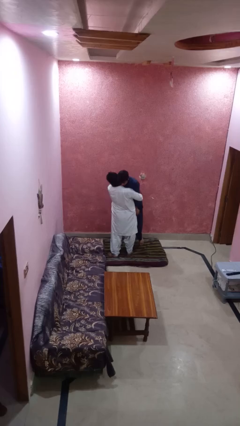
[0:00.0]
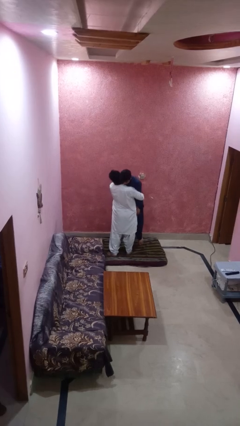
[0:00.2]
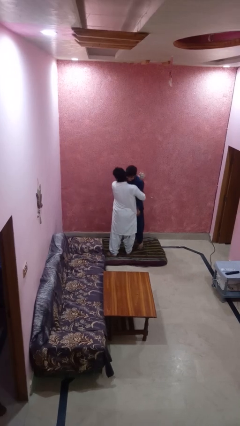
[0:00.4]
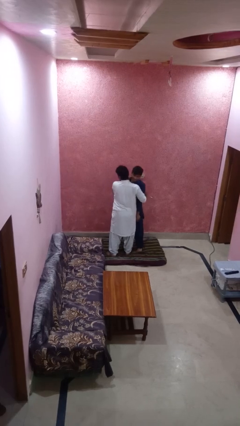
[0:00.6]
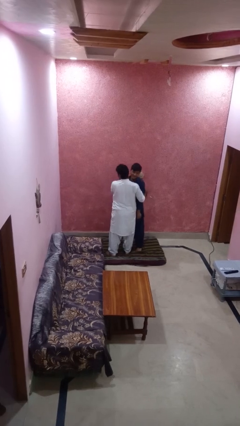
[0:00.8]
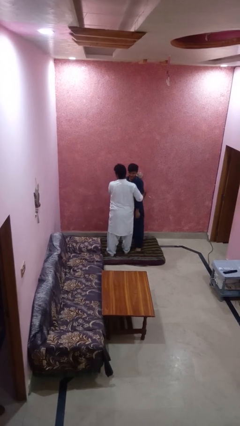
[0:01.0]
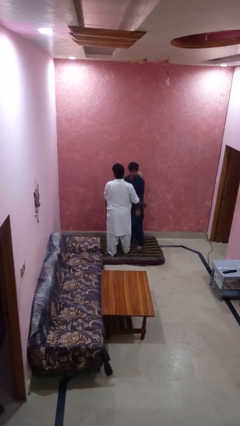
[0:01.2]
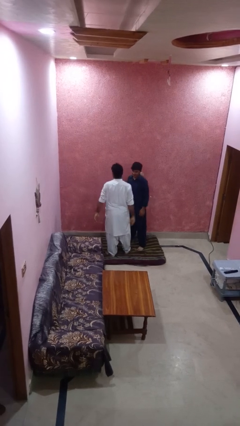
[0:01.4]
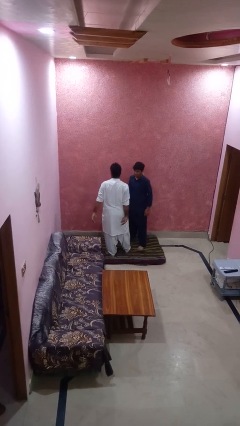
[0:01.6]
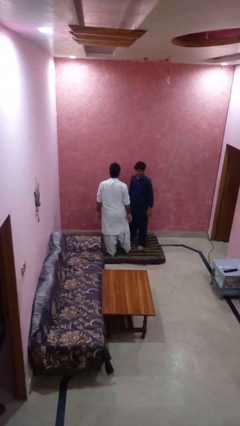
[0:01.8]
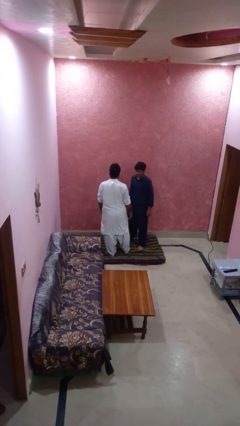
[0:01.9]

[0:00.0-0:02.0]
person puts down person

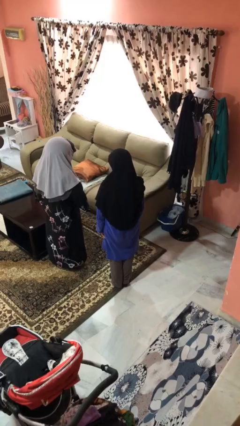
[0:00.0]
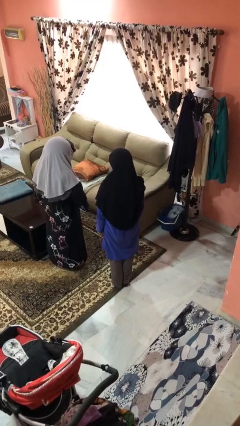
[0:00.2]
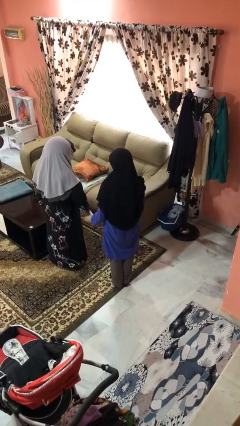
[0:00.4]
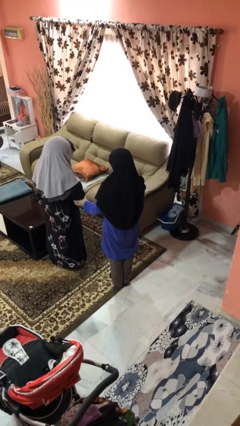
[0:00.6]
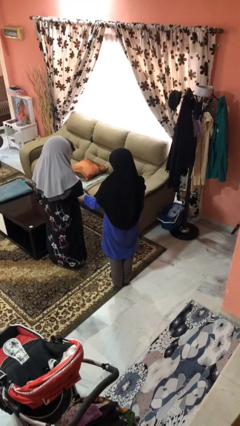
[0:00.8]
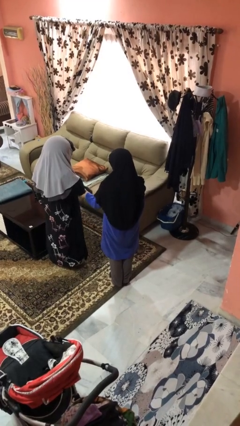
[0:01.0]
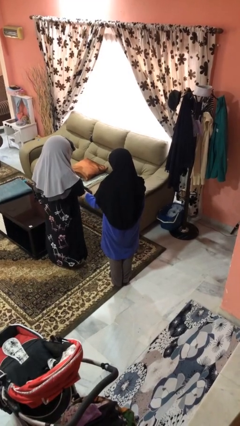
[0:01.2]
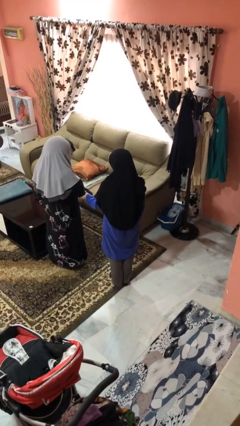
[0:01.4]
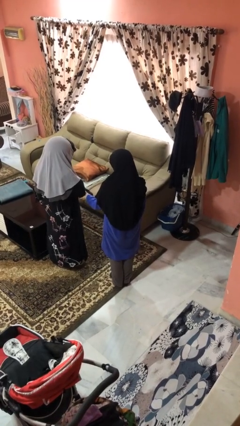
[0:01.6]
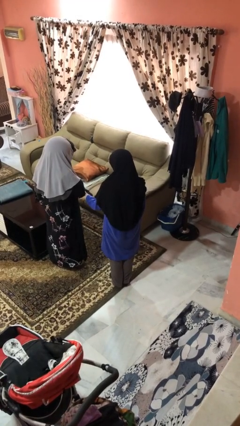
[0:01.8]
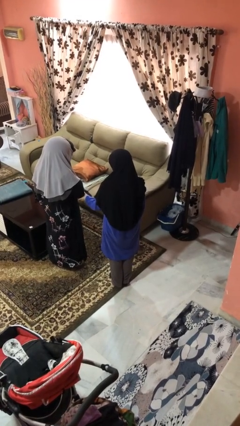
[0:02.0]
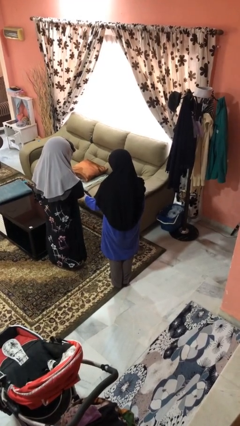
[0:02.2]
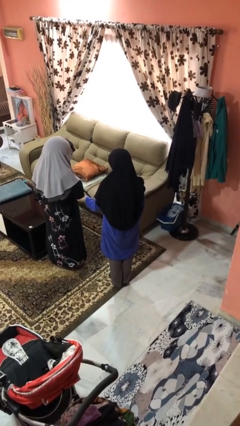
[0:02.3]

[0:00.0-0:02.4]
person grabs person by forearm

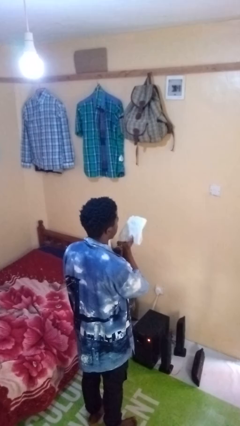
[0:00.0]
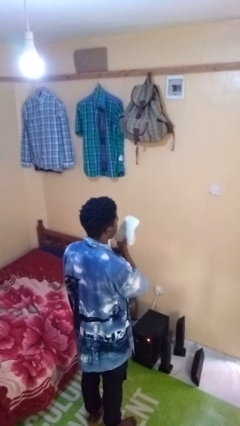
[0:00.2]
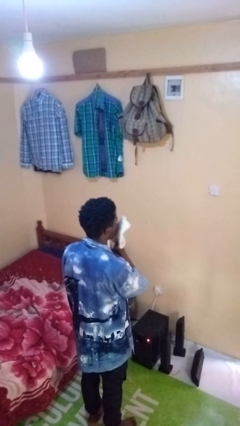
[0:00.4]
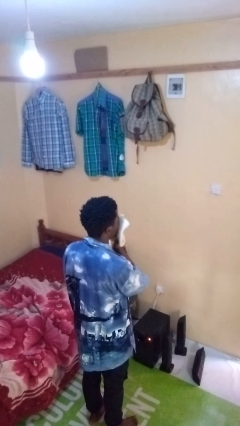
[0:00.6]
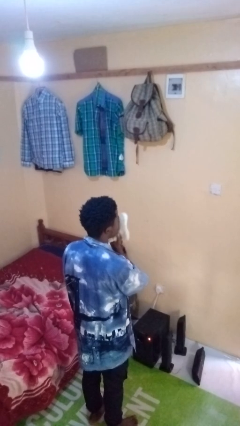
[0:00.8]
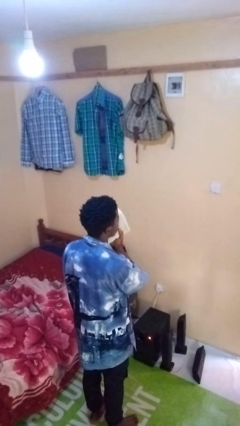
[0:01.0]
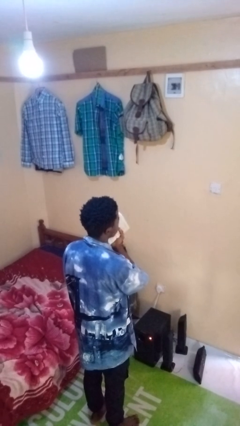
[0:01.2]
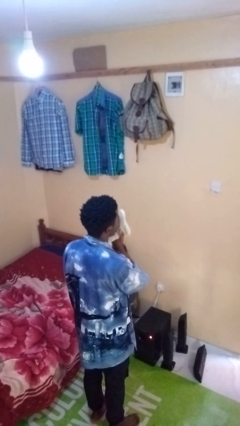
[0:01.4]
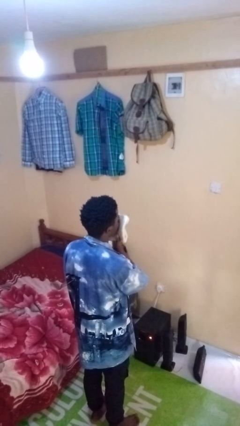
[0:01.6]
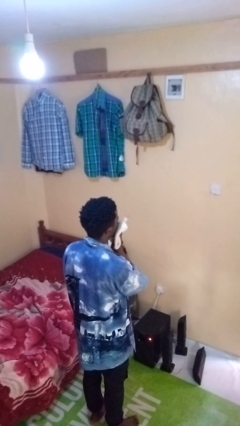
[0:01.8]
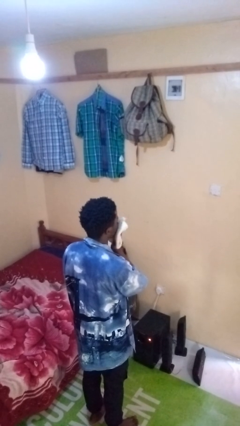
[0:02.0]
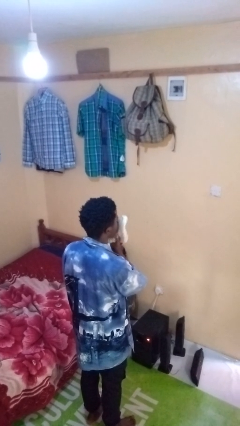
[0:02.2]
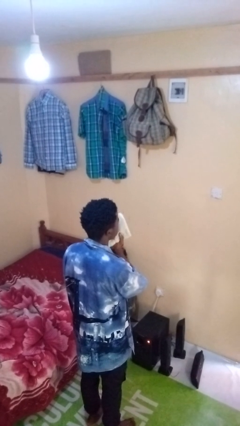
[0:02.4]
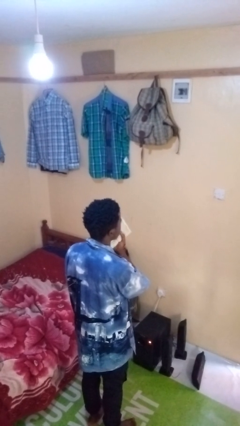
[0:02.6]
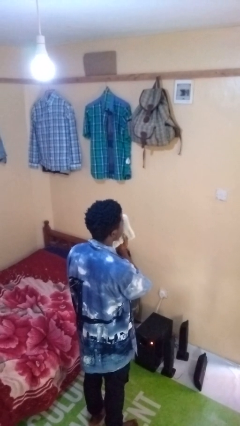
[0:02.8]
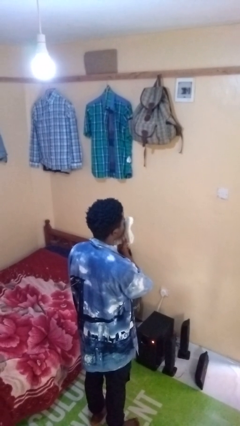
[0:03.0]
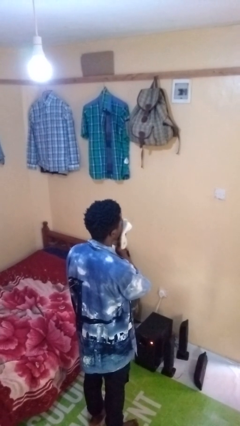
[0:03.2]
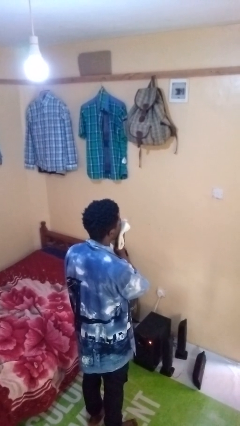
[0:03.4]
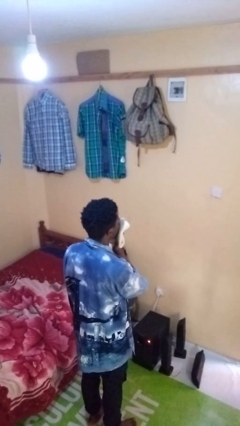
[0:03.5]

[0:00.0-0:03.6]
person wipes mouth with napkin

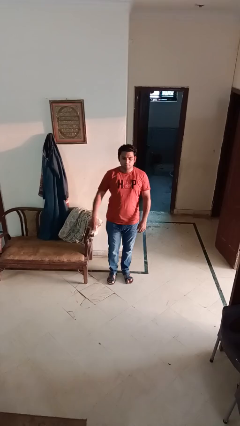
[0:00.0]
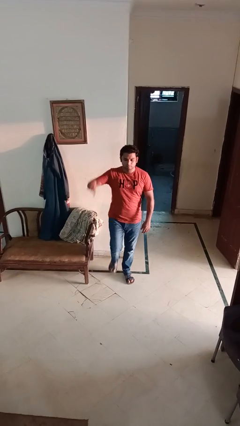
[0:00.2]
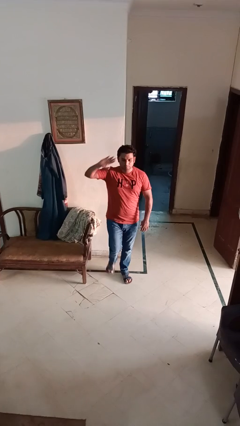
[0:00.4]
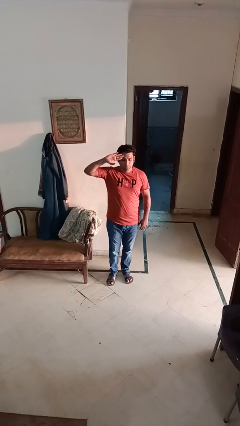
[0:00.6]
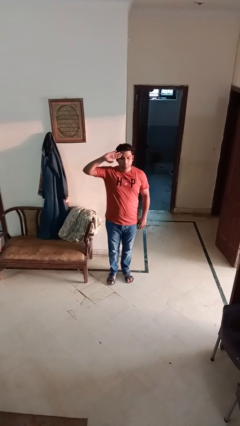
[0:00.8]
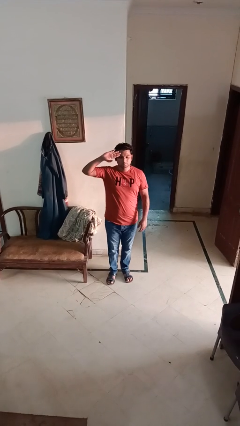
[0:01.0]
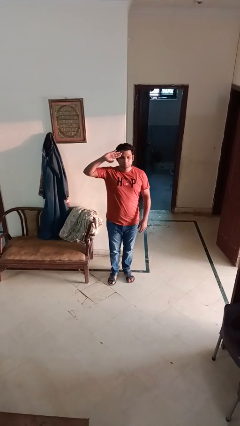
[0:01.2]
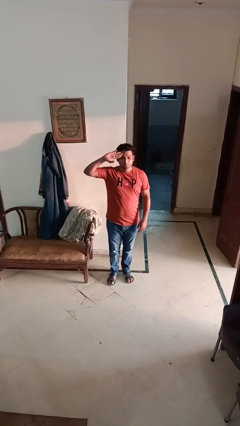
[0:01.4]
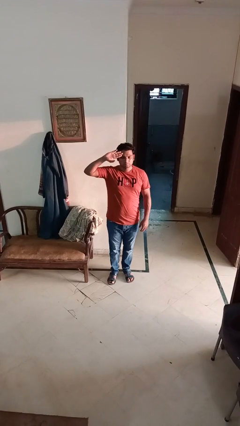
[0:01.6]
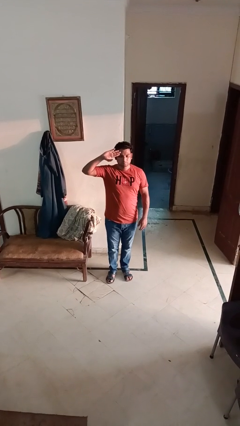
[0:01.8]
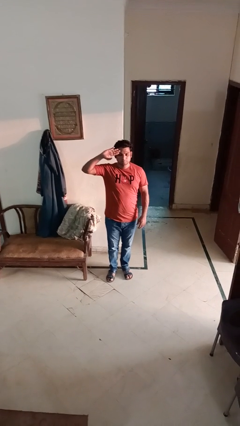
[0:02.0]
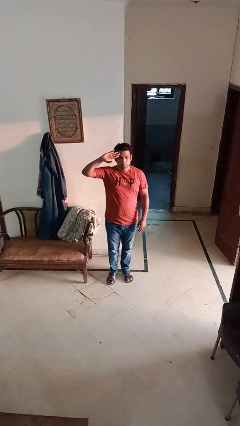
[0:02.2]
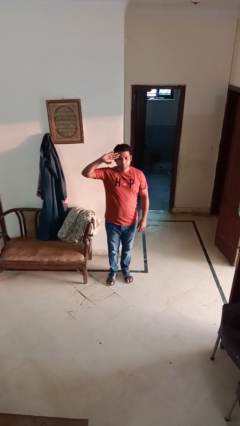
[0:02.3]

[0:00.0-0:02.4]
person salutes

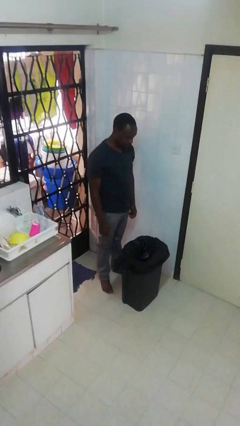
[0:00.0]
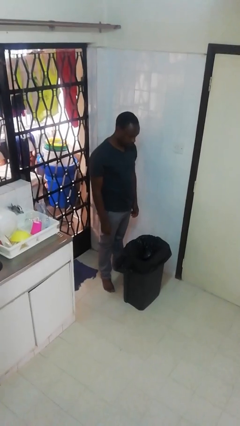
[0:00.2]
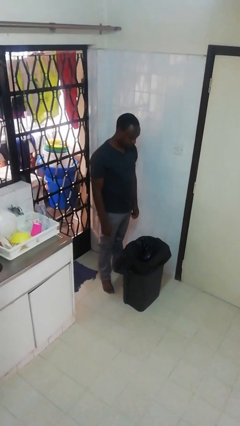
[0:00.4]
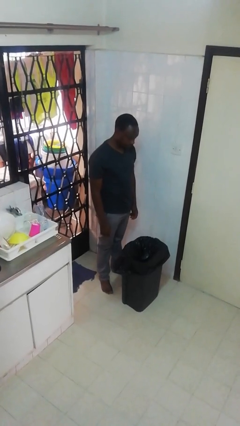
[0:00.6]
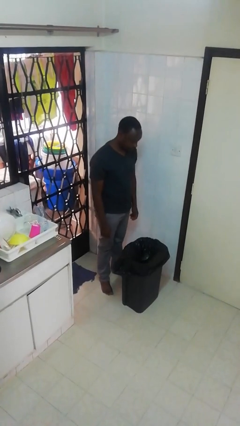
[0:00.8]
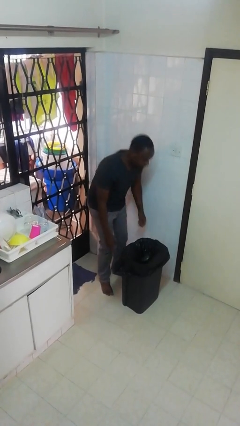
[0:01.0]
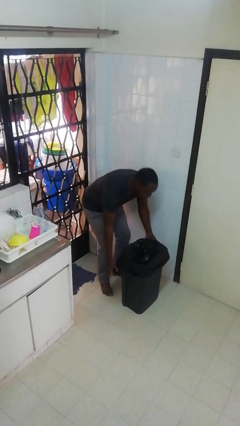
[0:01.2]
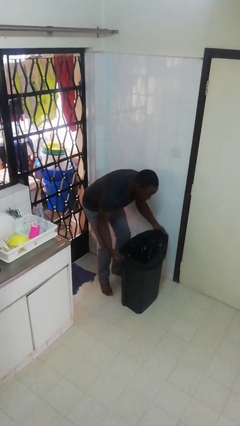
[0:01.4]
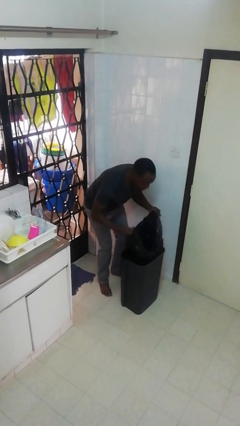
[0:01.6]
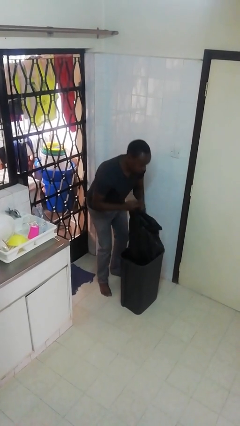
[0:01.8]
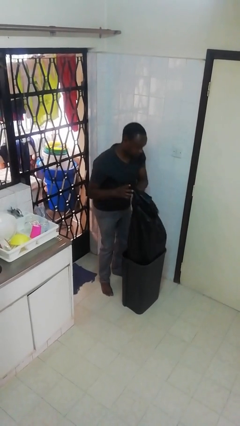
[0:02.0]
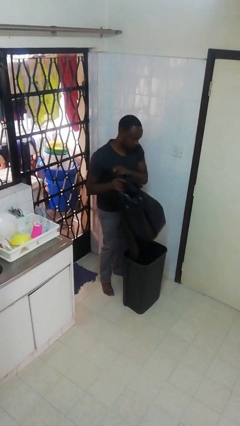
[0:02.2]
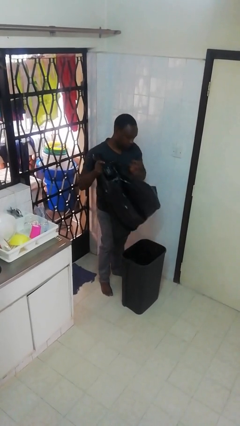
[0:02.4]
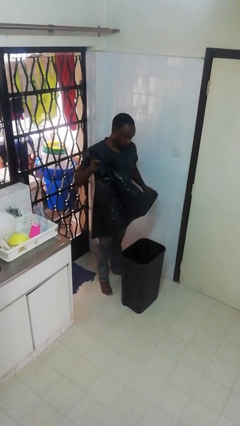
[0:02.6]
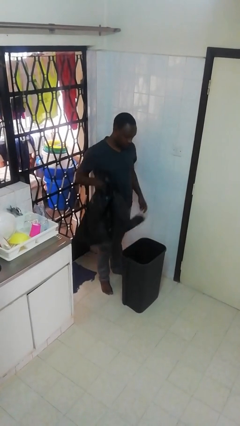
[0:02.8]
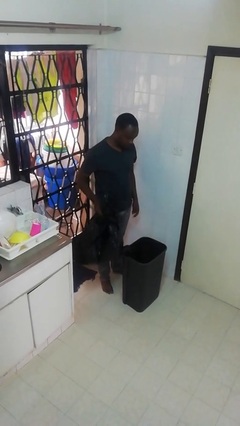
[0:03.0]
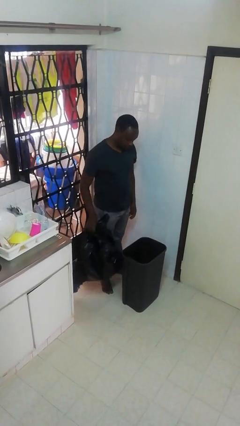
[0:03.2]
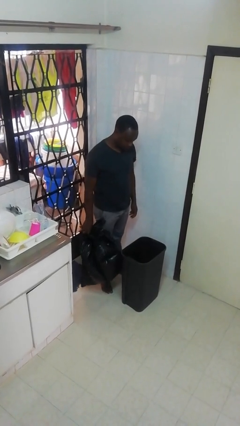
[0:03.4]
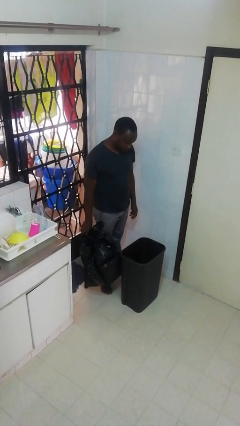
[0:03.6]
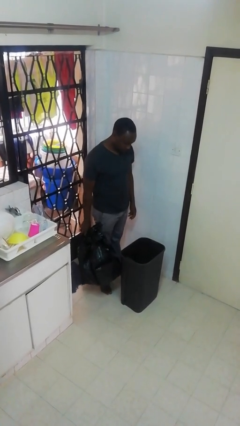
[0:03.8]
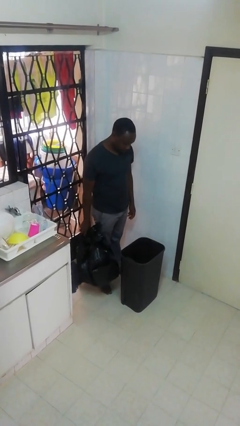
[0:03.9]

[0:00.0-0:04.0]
person removes trashbag from trashcan

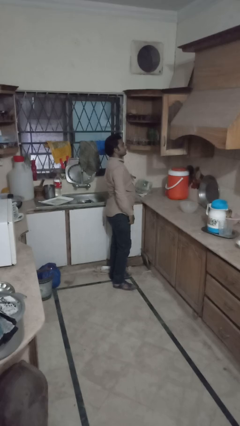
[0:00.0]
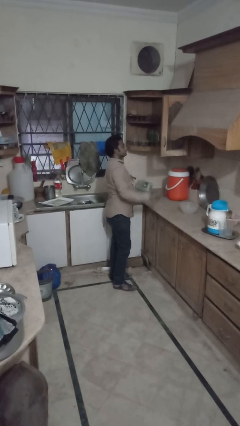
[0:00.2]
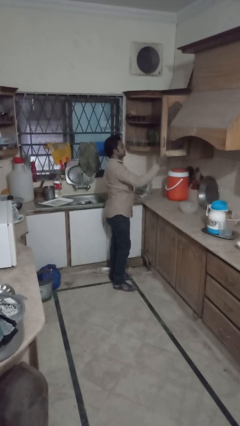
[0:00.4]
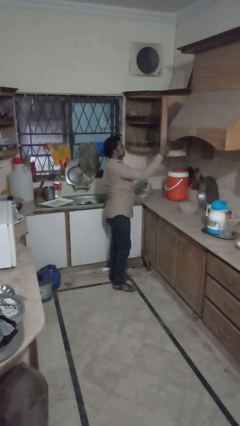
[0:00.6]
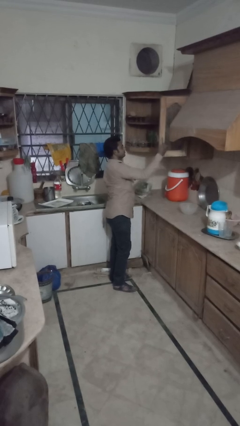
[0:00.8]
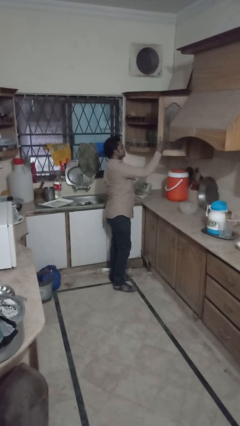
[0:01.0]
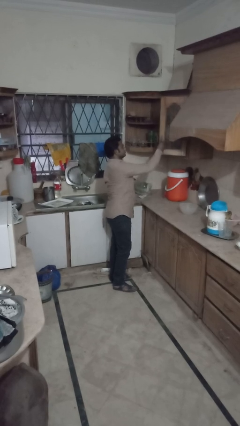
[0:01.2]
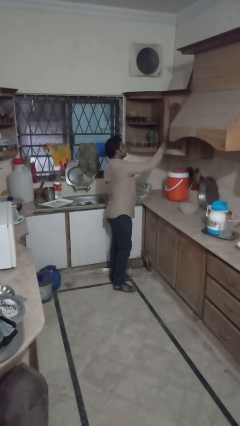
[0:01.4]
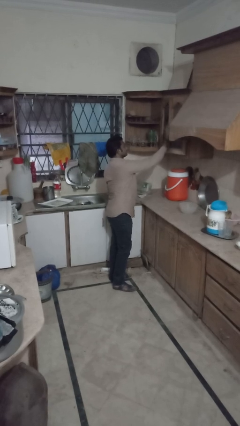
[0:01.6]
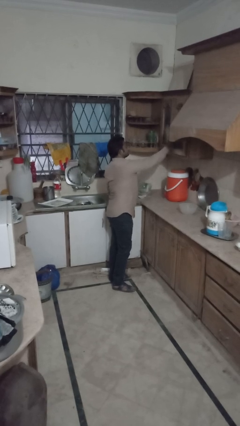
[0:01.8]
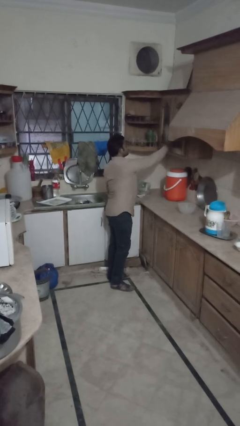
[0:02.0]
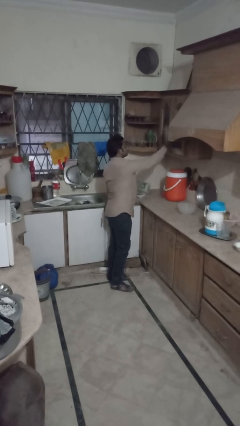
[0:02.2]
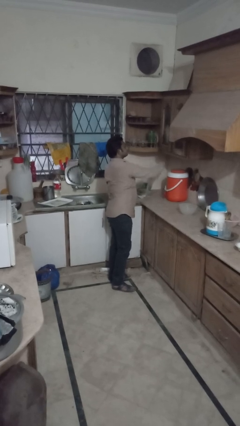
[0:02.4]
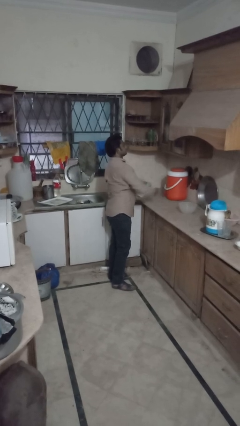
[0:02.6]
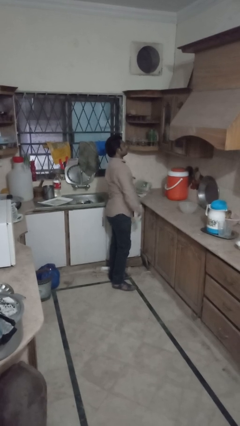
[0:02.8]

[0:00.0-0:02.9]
person closes cabinet
